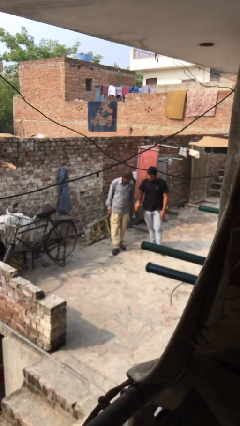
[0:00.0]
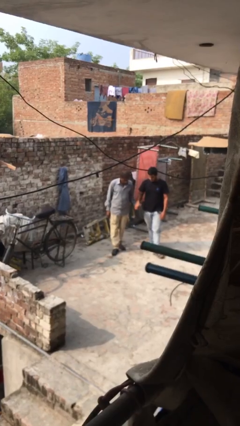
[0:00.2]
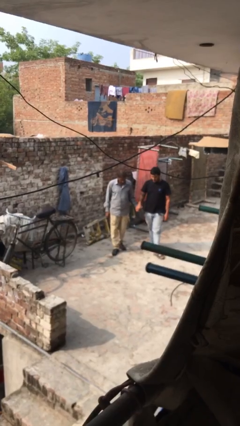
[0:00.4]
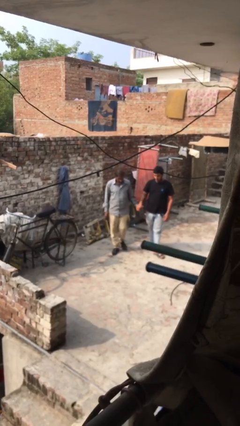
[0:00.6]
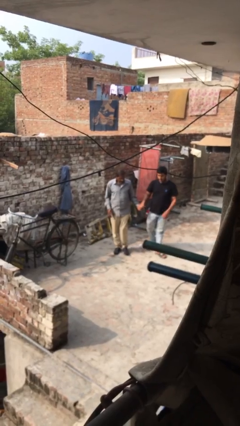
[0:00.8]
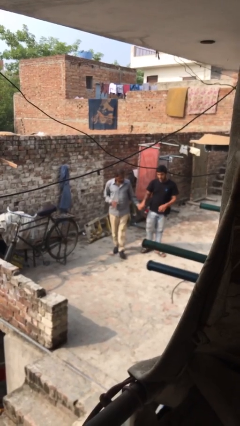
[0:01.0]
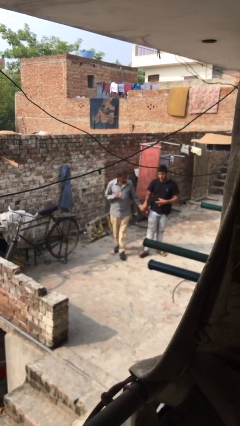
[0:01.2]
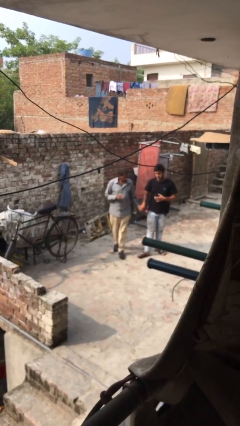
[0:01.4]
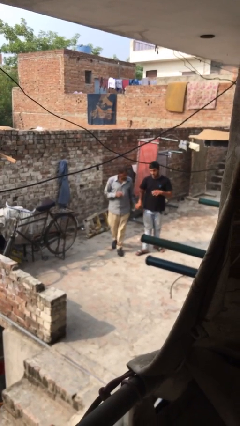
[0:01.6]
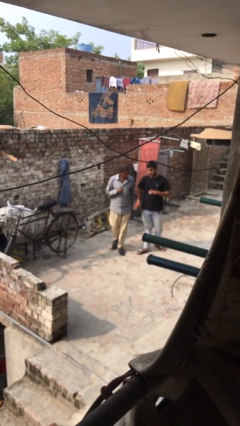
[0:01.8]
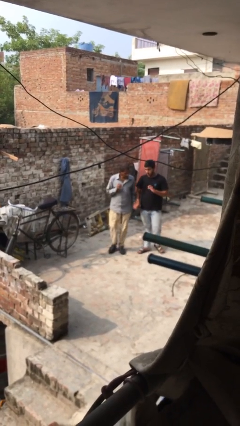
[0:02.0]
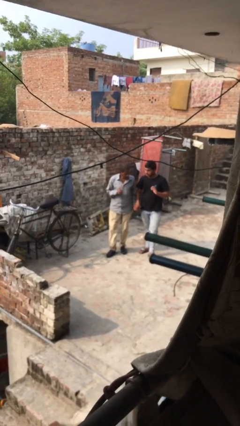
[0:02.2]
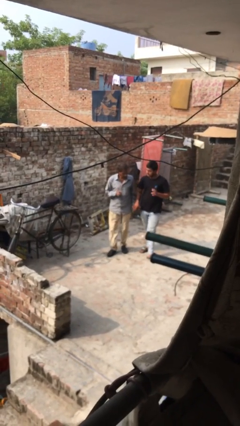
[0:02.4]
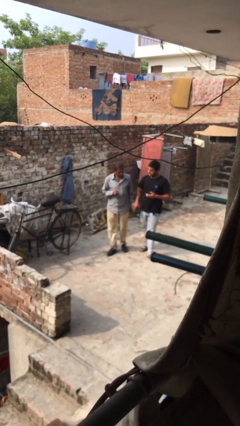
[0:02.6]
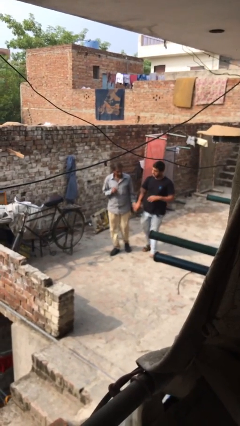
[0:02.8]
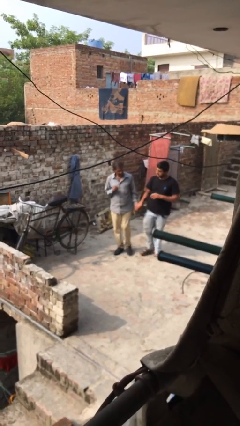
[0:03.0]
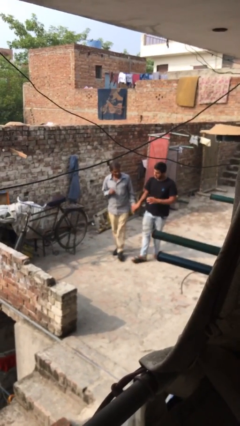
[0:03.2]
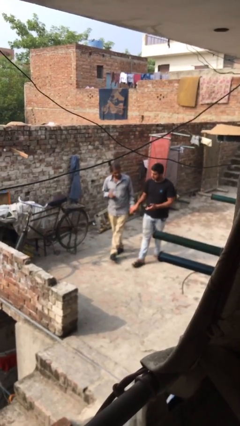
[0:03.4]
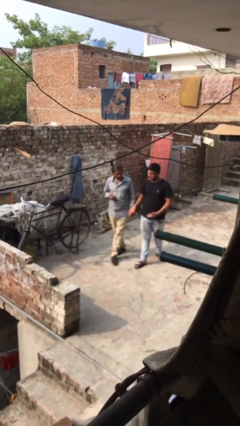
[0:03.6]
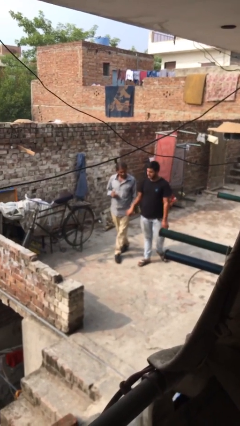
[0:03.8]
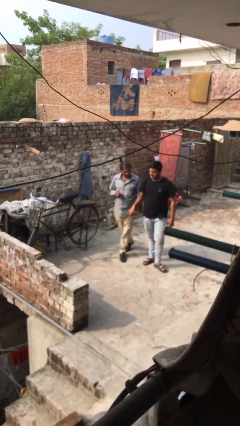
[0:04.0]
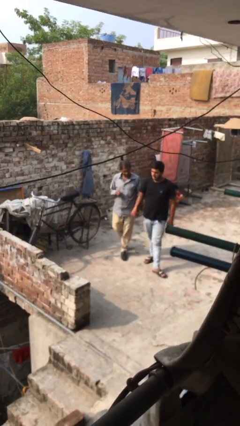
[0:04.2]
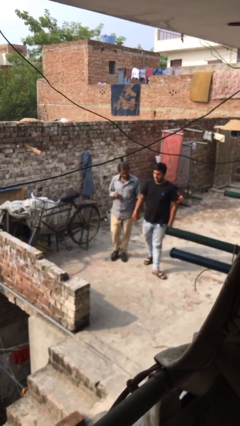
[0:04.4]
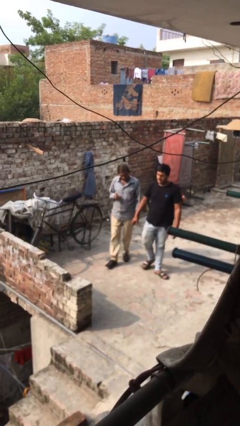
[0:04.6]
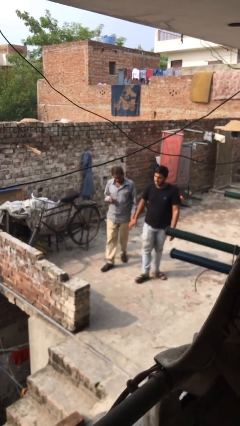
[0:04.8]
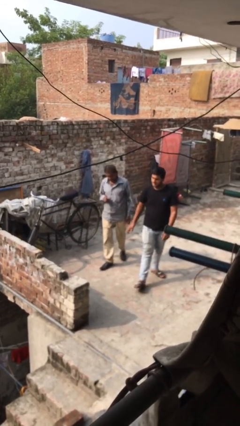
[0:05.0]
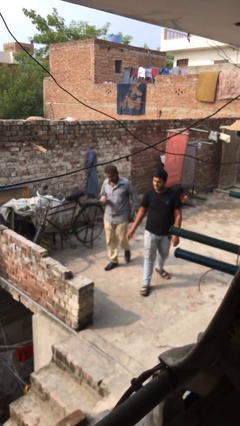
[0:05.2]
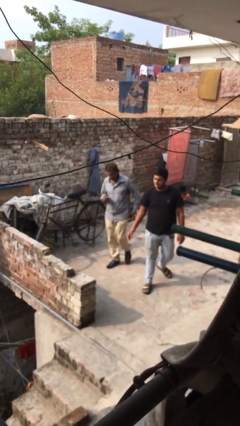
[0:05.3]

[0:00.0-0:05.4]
person holds hand

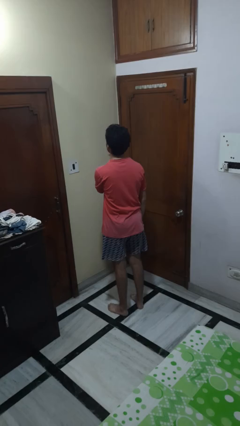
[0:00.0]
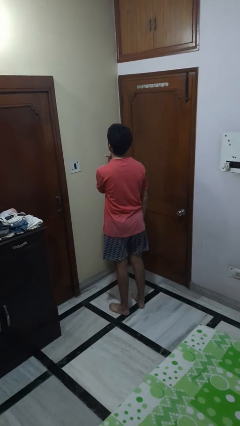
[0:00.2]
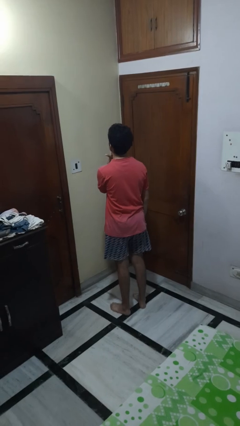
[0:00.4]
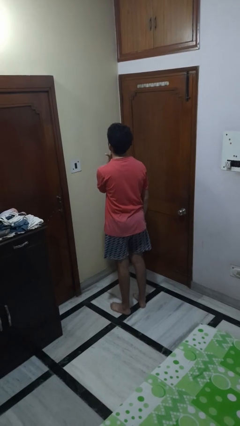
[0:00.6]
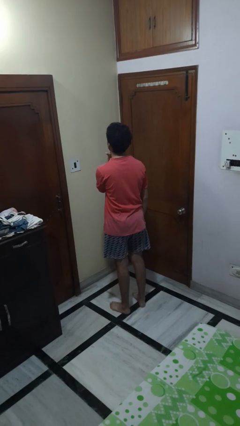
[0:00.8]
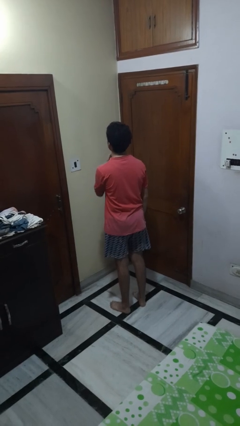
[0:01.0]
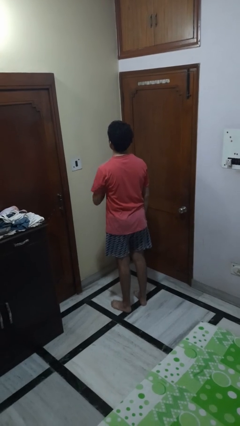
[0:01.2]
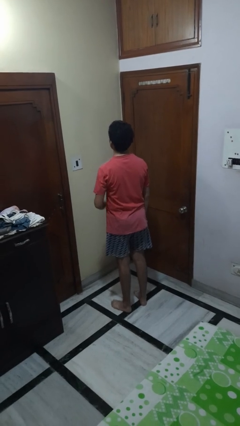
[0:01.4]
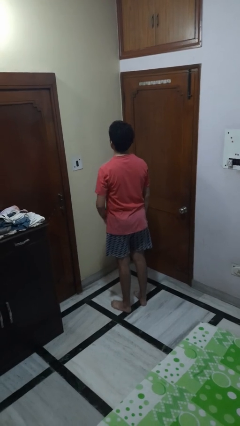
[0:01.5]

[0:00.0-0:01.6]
person gestures cut

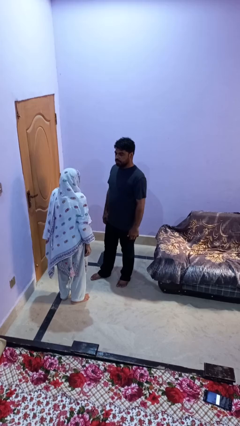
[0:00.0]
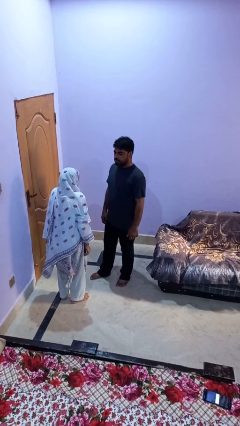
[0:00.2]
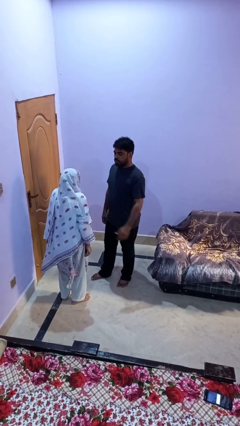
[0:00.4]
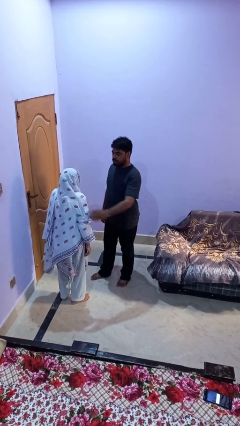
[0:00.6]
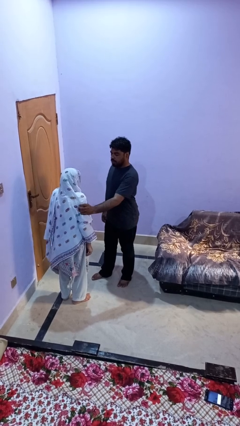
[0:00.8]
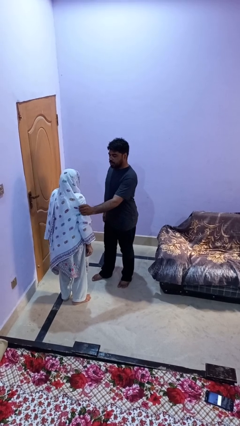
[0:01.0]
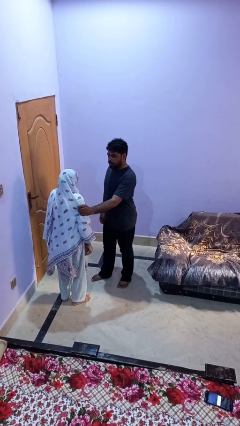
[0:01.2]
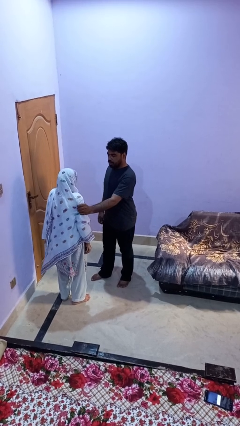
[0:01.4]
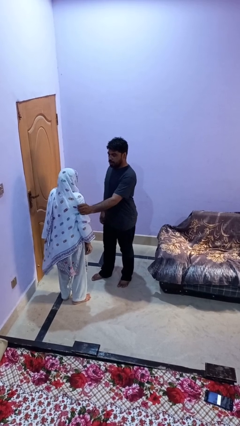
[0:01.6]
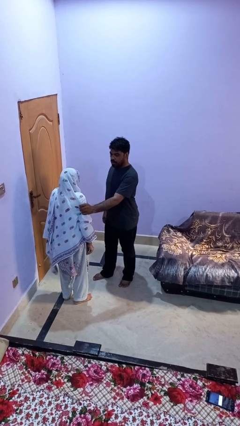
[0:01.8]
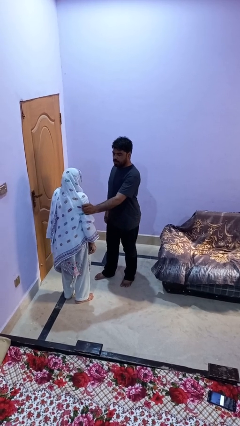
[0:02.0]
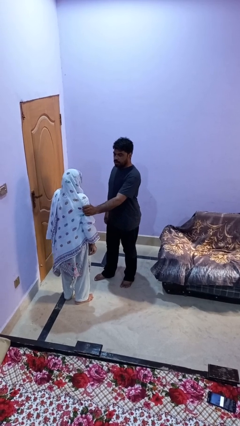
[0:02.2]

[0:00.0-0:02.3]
person grabs person by bicep

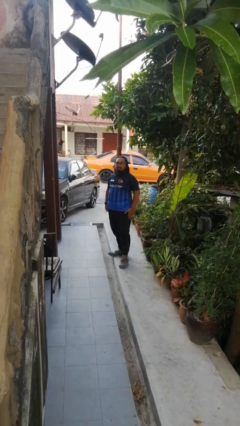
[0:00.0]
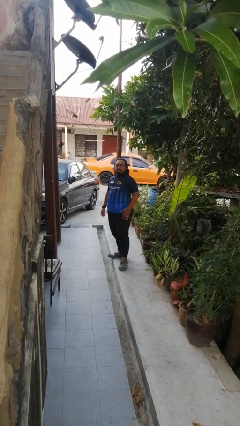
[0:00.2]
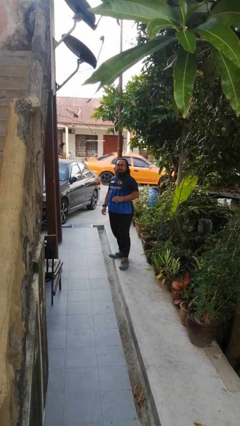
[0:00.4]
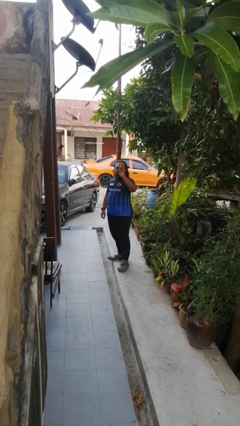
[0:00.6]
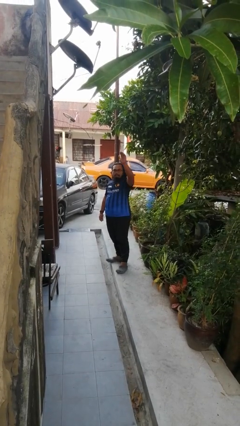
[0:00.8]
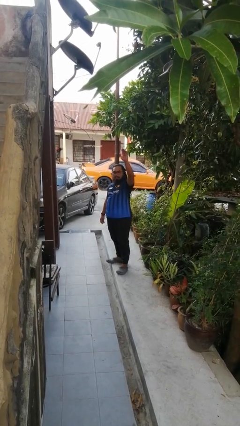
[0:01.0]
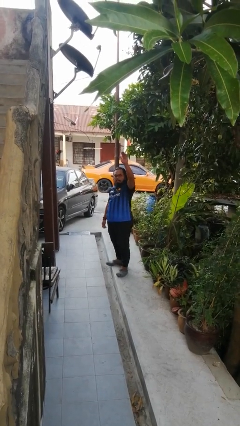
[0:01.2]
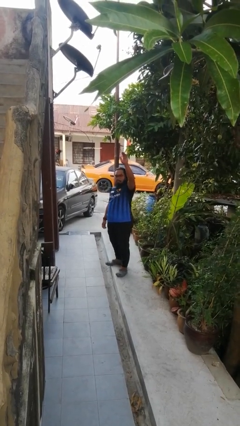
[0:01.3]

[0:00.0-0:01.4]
person gestures raise hand

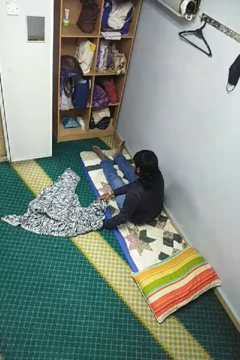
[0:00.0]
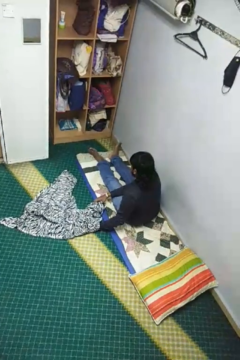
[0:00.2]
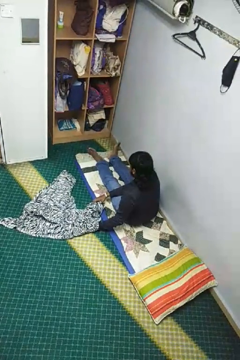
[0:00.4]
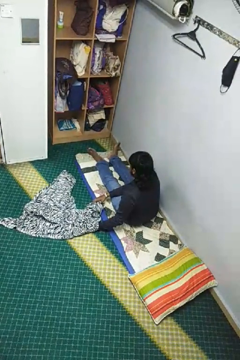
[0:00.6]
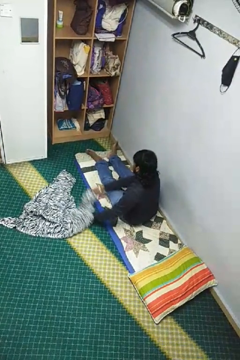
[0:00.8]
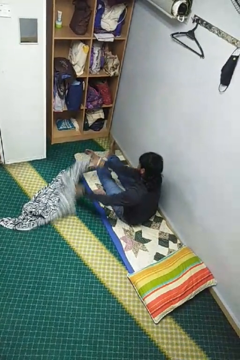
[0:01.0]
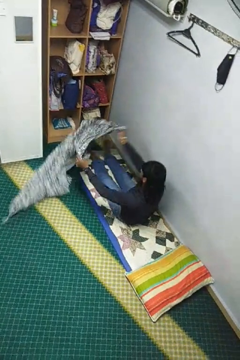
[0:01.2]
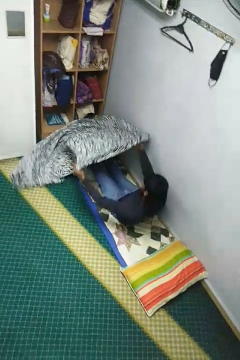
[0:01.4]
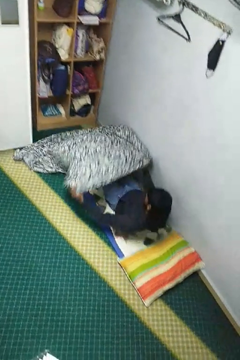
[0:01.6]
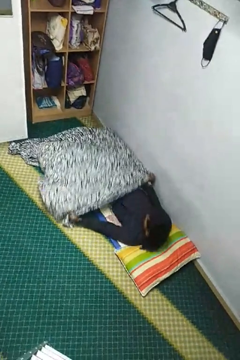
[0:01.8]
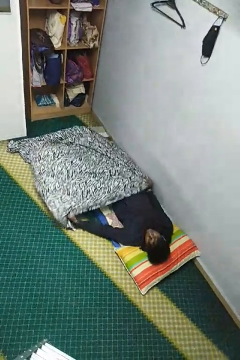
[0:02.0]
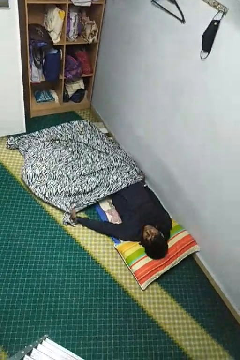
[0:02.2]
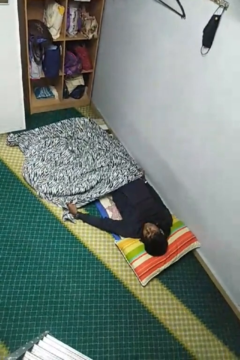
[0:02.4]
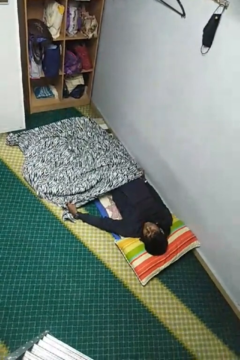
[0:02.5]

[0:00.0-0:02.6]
person covers with blanket

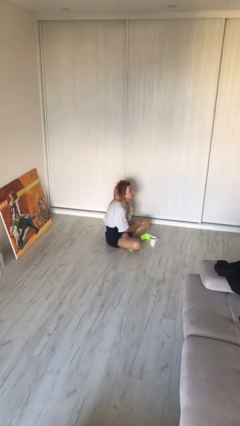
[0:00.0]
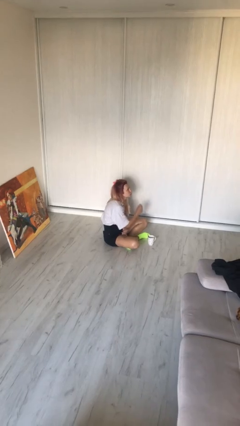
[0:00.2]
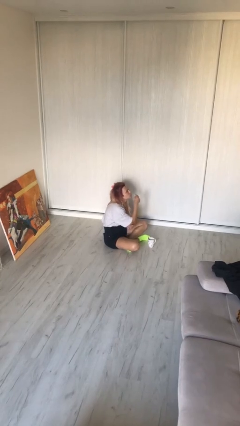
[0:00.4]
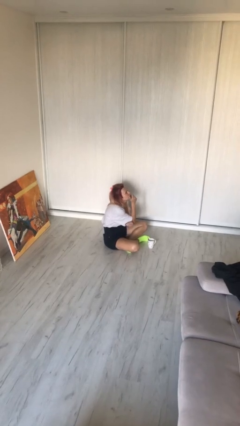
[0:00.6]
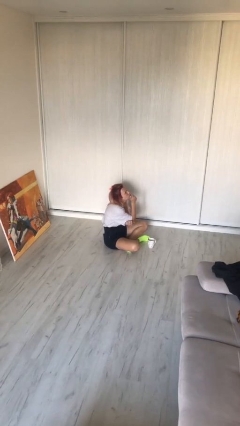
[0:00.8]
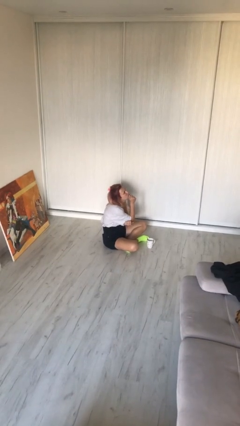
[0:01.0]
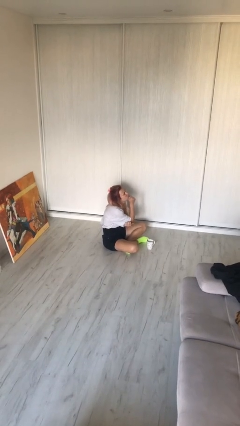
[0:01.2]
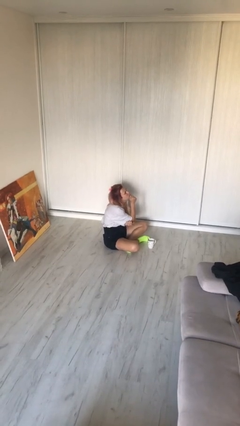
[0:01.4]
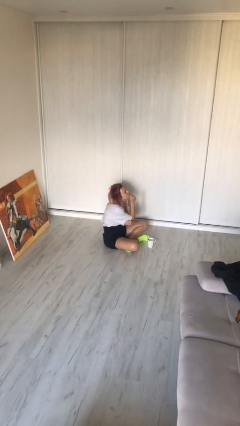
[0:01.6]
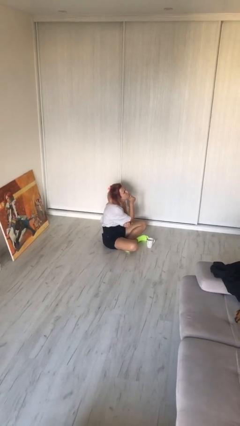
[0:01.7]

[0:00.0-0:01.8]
person strokes chin

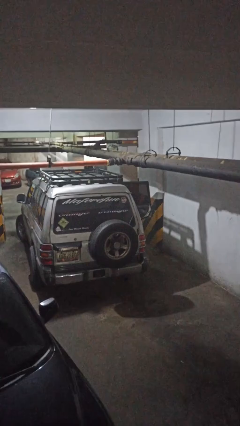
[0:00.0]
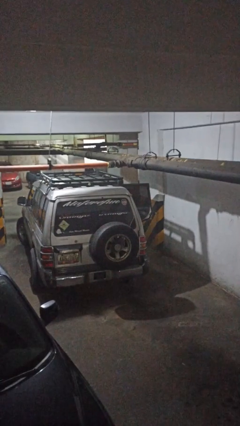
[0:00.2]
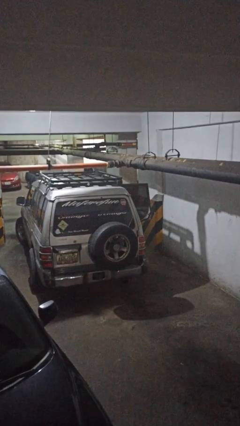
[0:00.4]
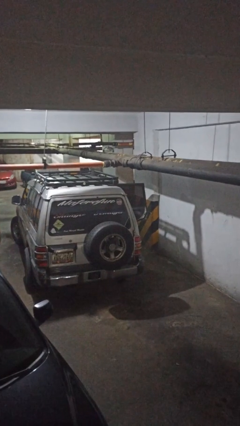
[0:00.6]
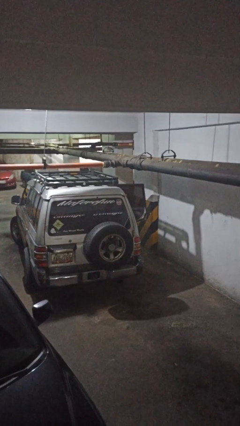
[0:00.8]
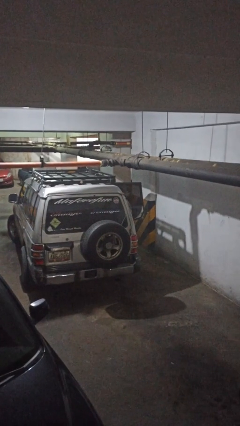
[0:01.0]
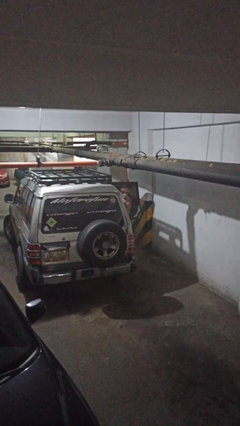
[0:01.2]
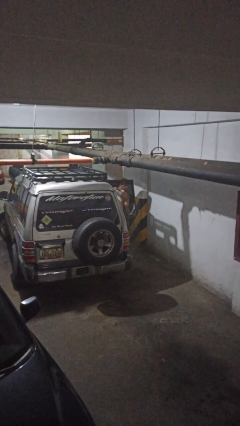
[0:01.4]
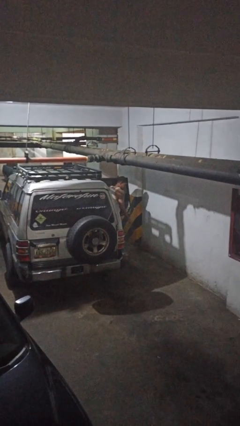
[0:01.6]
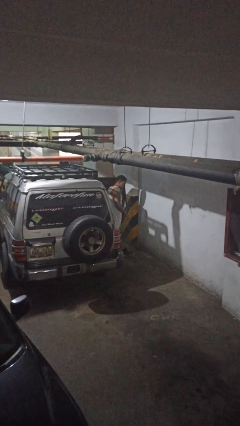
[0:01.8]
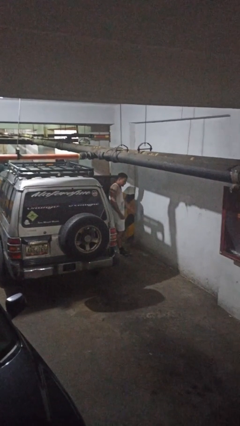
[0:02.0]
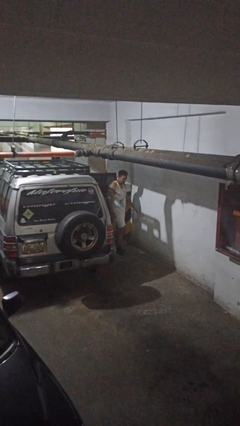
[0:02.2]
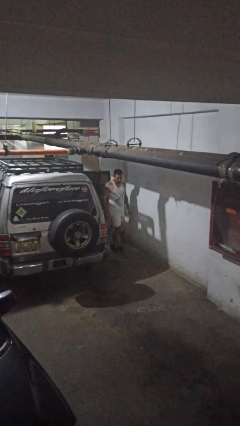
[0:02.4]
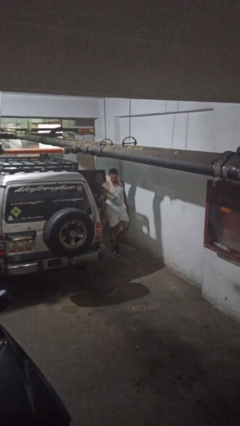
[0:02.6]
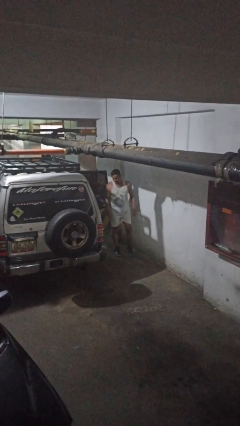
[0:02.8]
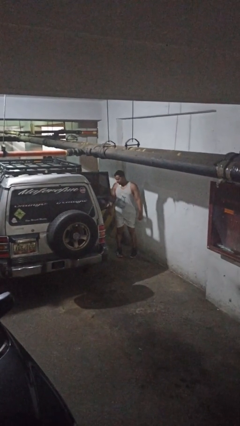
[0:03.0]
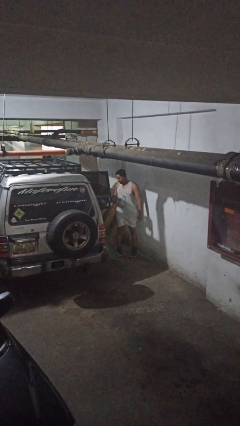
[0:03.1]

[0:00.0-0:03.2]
person exits car
